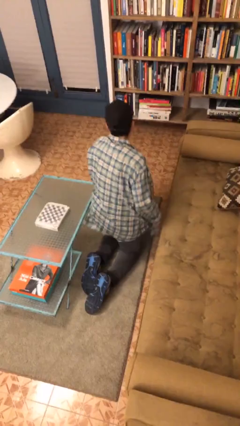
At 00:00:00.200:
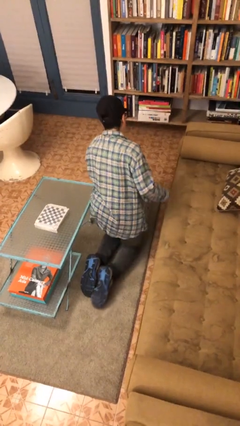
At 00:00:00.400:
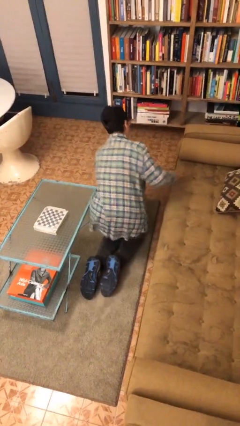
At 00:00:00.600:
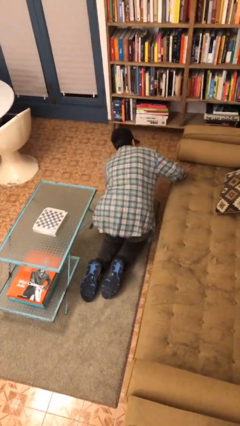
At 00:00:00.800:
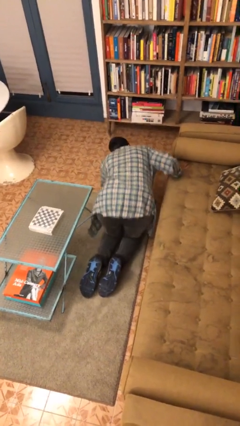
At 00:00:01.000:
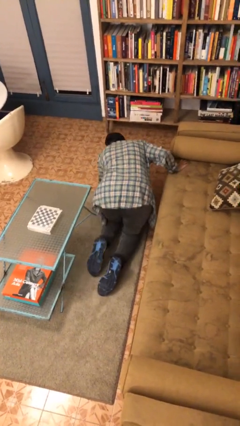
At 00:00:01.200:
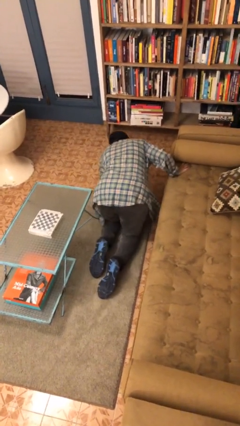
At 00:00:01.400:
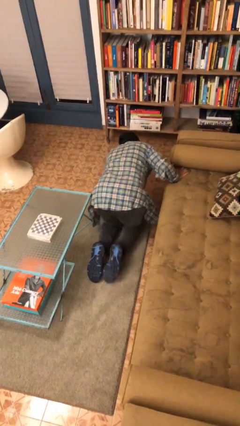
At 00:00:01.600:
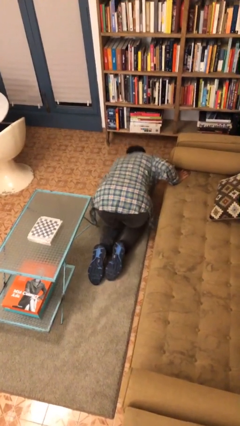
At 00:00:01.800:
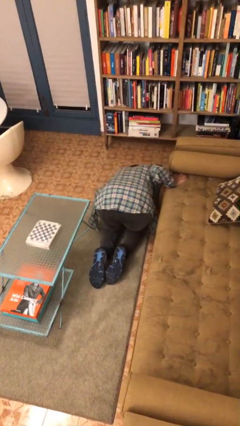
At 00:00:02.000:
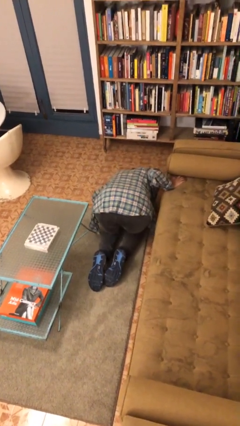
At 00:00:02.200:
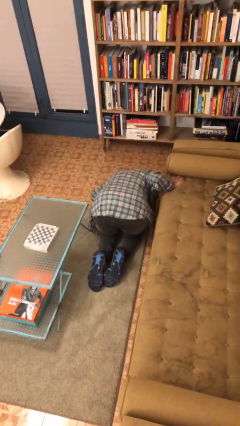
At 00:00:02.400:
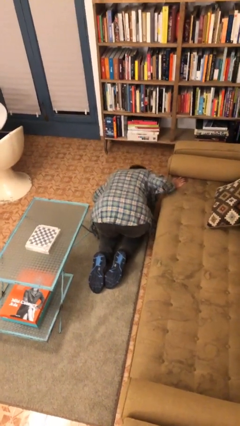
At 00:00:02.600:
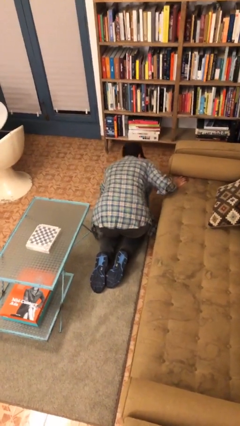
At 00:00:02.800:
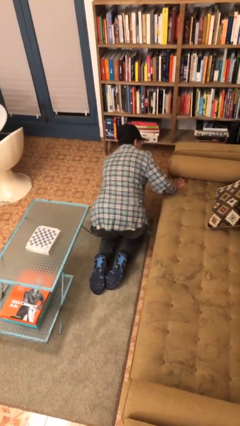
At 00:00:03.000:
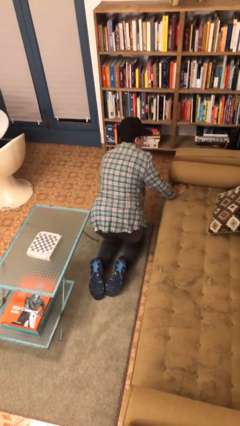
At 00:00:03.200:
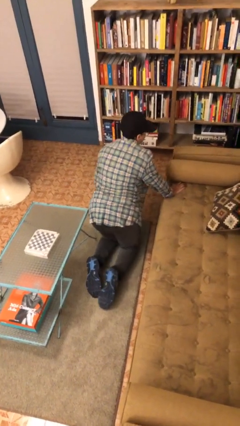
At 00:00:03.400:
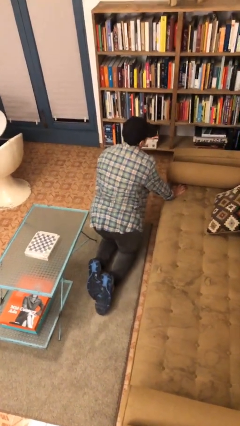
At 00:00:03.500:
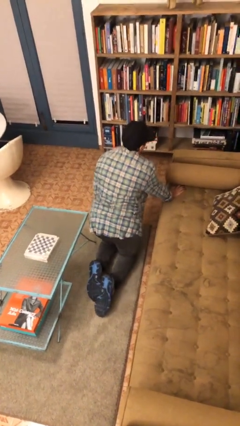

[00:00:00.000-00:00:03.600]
person searches under couch
